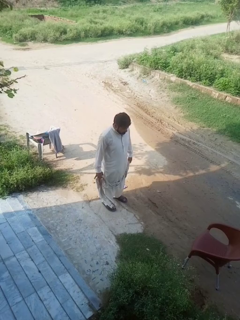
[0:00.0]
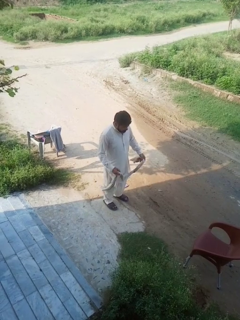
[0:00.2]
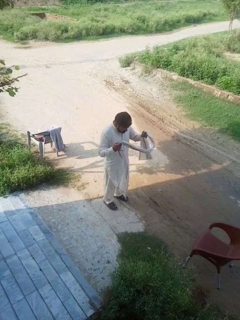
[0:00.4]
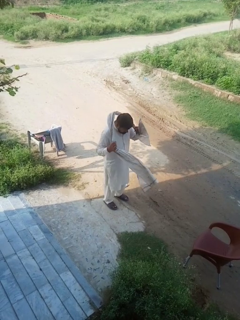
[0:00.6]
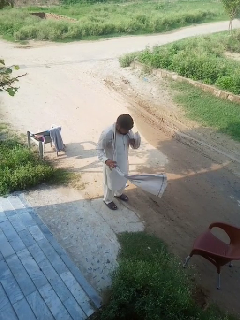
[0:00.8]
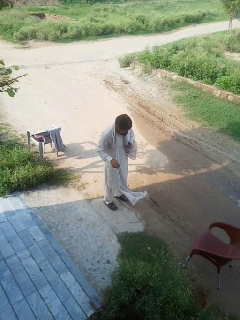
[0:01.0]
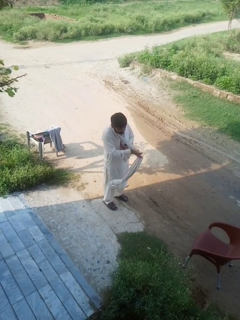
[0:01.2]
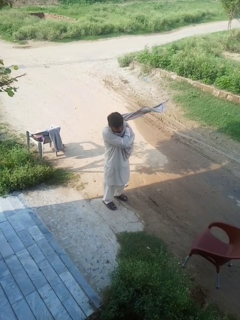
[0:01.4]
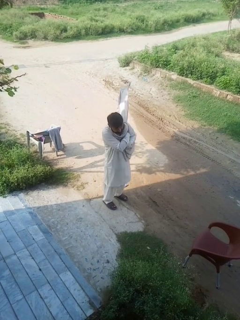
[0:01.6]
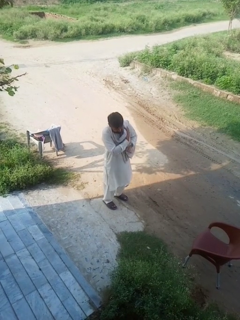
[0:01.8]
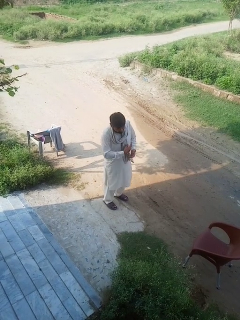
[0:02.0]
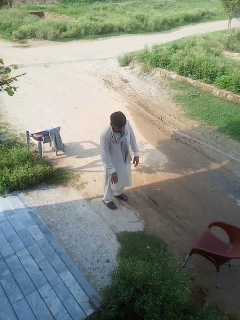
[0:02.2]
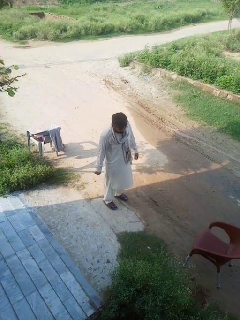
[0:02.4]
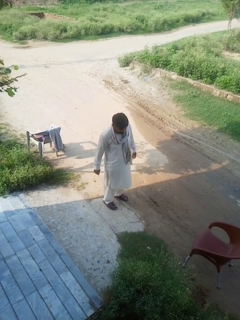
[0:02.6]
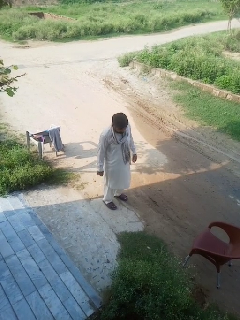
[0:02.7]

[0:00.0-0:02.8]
person puts on scarf

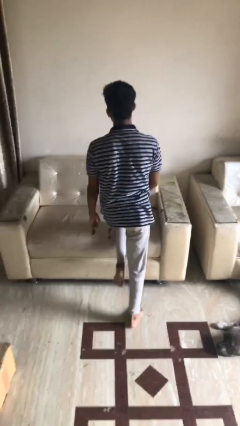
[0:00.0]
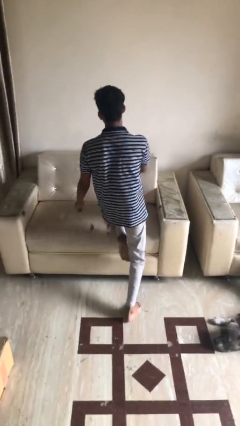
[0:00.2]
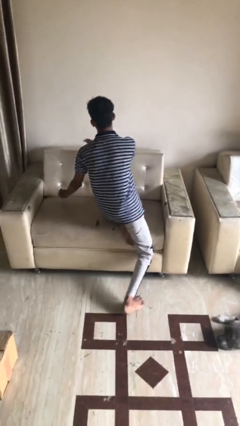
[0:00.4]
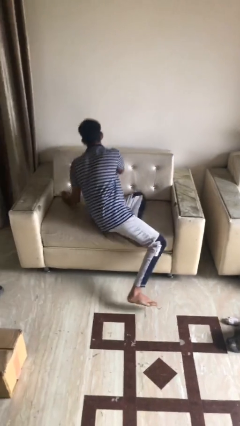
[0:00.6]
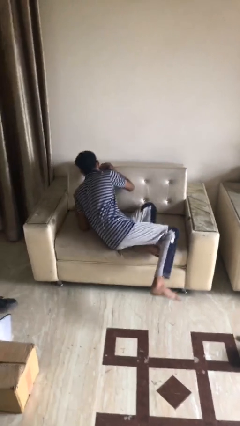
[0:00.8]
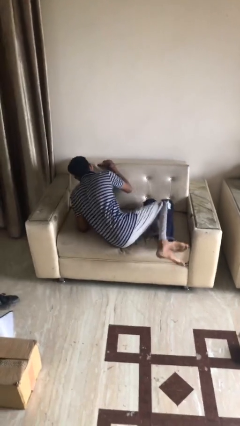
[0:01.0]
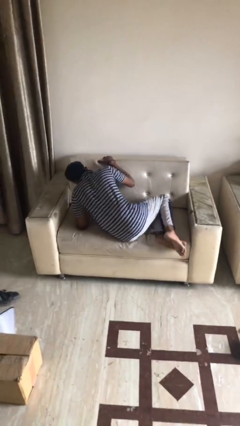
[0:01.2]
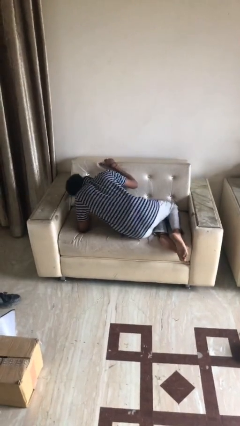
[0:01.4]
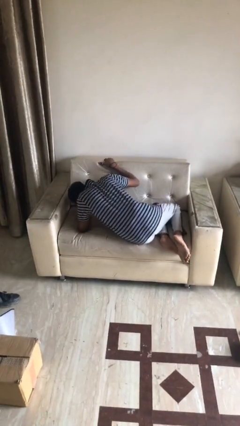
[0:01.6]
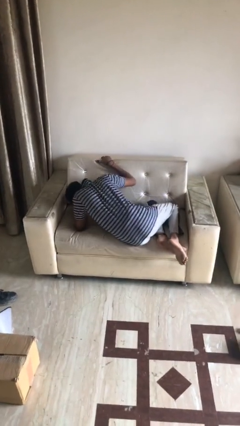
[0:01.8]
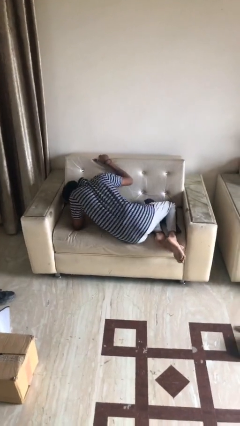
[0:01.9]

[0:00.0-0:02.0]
person lies down on bed

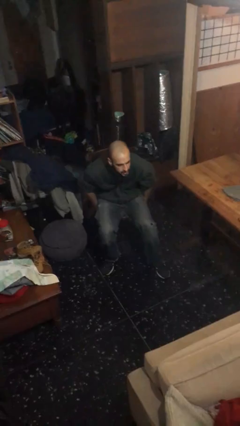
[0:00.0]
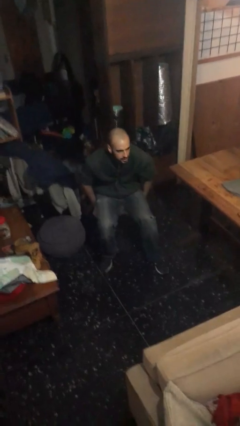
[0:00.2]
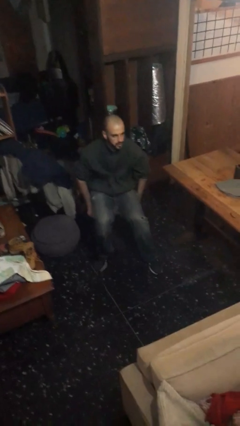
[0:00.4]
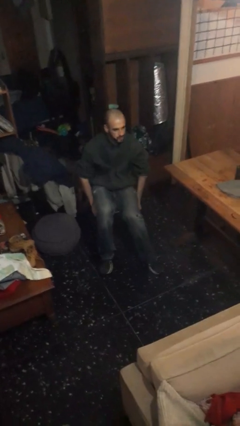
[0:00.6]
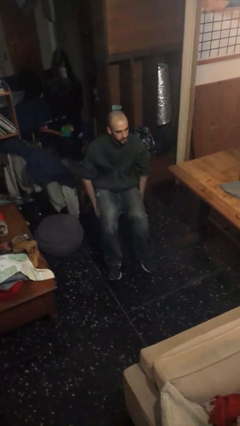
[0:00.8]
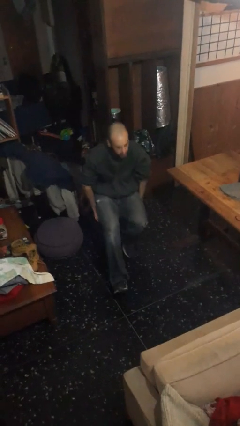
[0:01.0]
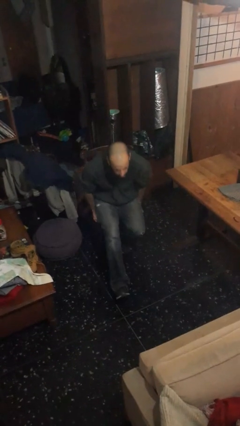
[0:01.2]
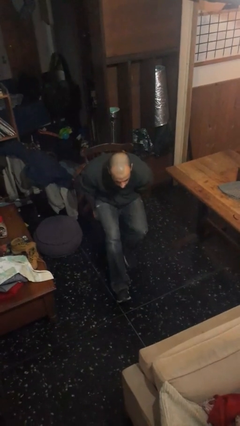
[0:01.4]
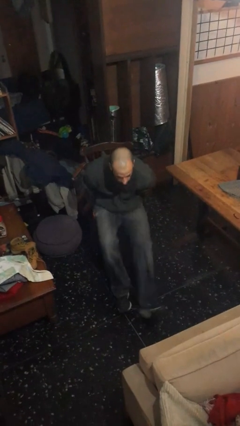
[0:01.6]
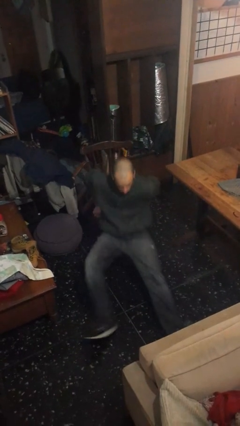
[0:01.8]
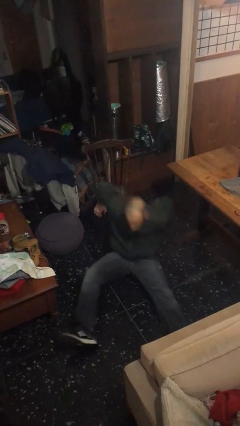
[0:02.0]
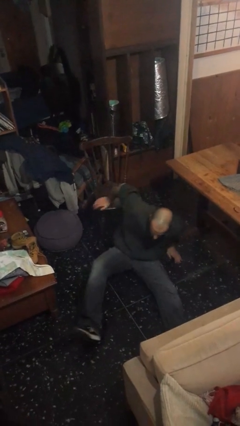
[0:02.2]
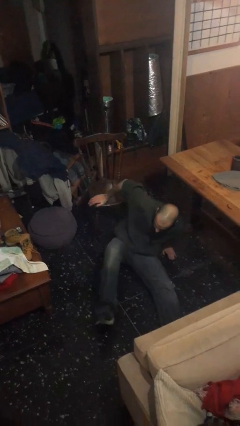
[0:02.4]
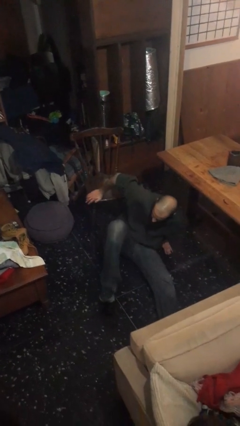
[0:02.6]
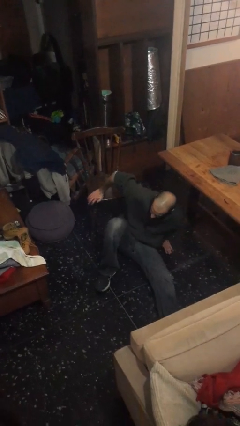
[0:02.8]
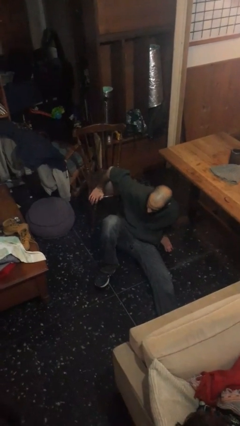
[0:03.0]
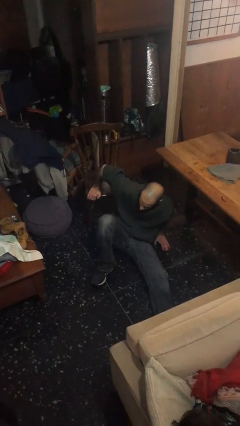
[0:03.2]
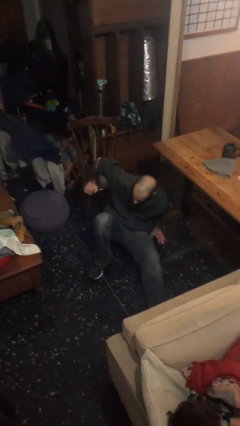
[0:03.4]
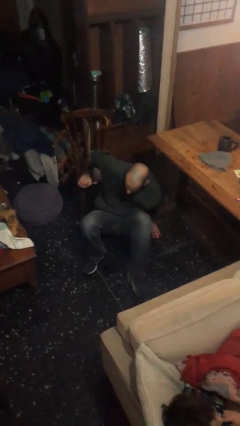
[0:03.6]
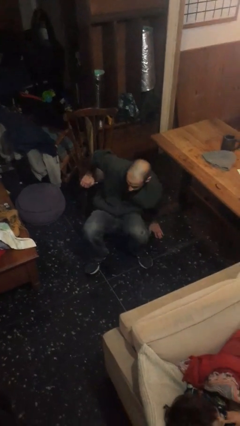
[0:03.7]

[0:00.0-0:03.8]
person falls from chair

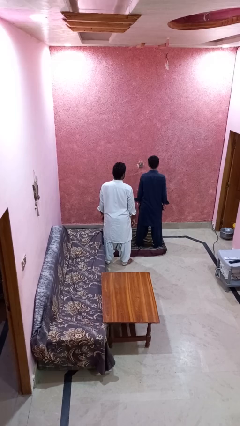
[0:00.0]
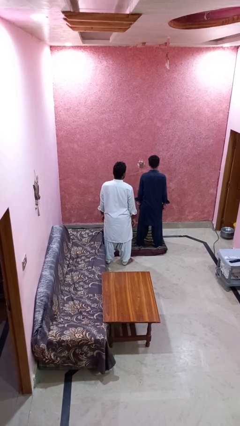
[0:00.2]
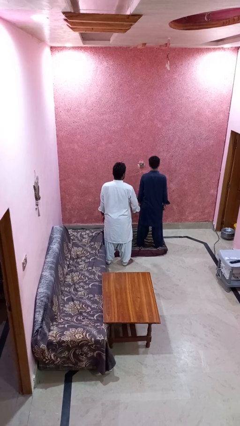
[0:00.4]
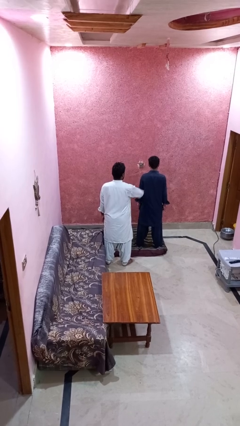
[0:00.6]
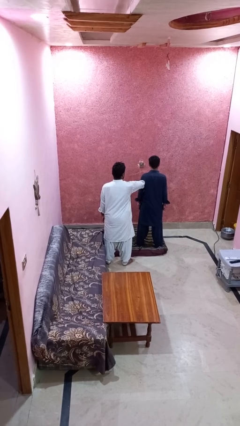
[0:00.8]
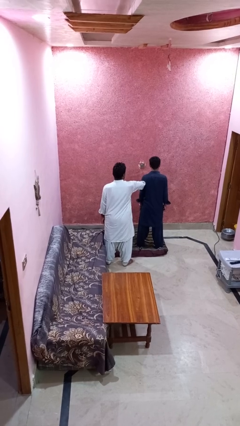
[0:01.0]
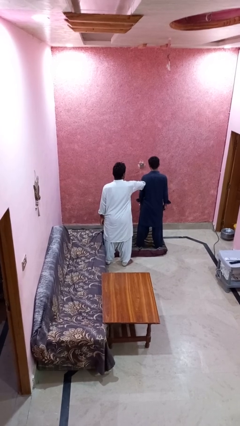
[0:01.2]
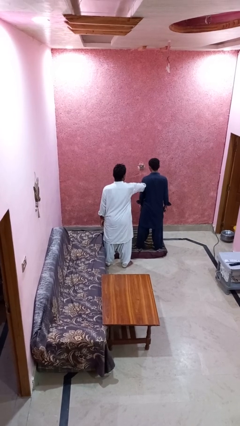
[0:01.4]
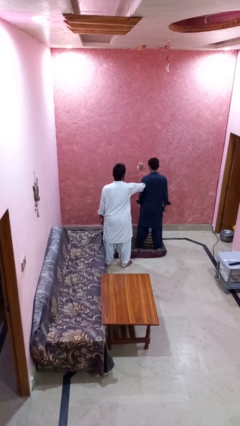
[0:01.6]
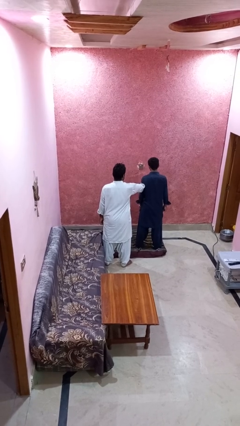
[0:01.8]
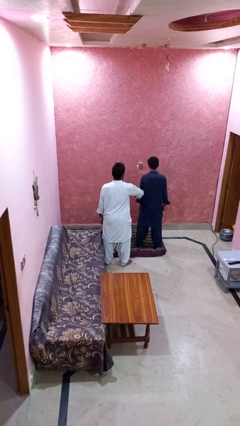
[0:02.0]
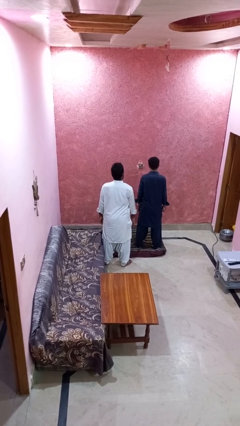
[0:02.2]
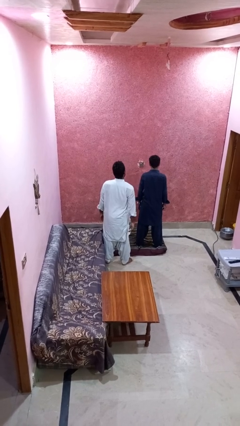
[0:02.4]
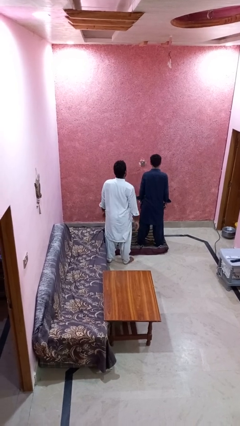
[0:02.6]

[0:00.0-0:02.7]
person grabs person by forearm

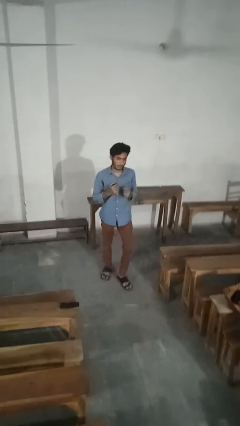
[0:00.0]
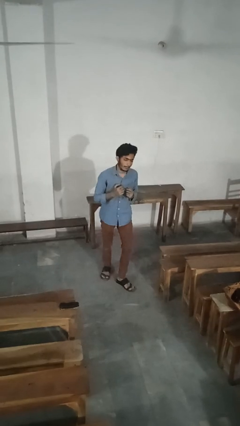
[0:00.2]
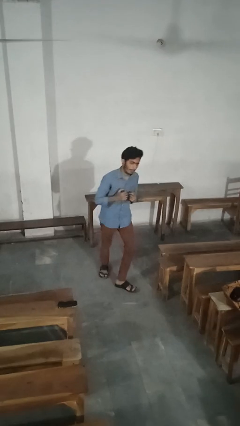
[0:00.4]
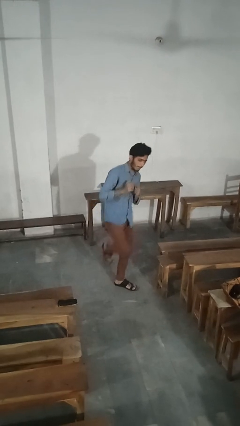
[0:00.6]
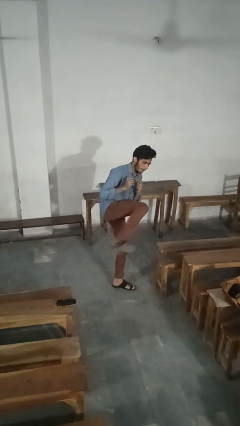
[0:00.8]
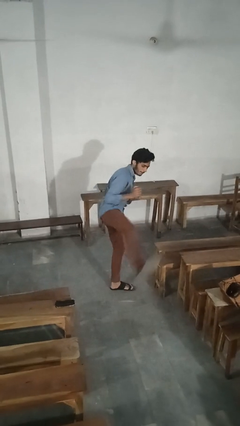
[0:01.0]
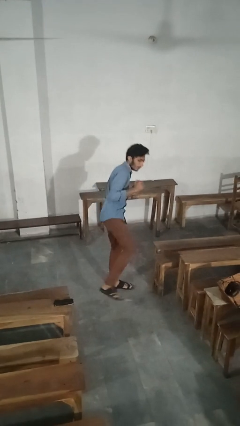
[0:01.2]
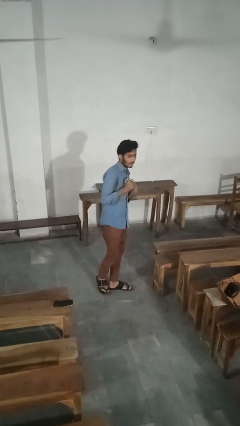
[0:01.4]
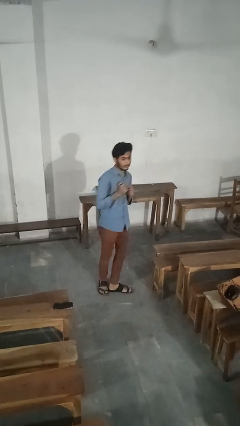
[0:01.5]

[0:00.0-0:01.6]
person karate kicks

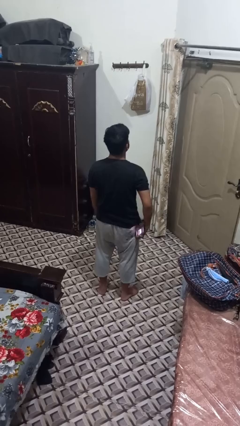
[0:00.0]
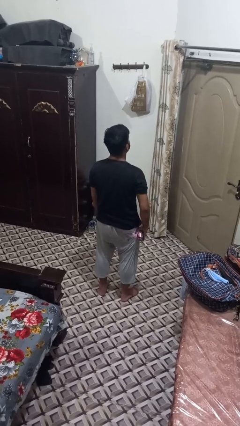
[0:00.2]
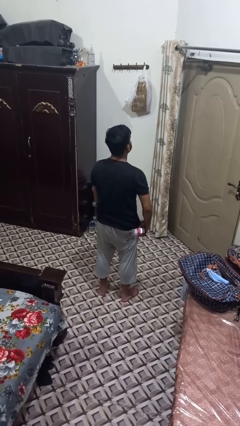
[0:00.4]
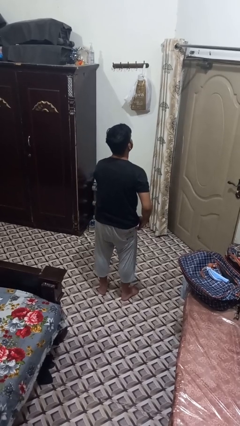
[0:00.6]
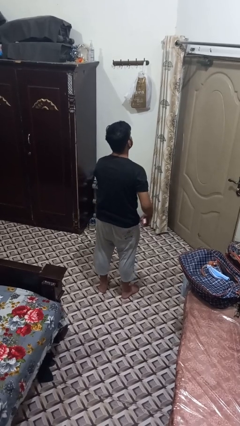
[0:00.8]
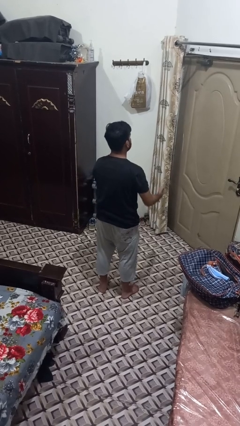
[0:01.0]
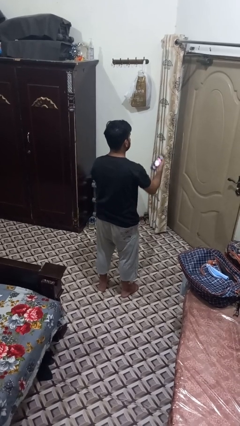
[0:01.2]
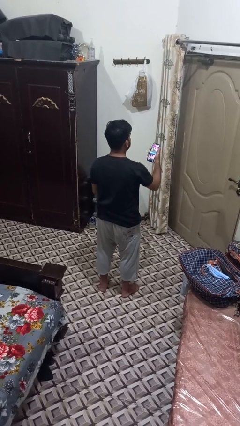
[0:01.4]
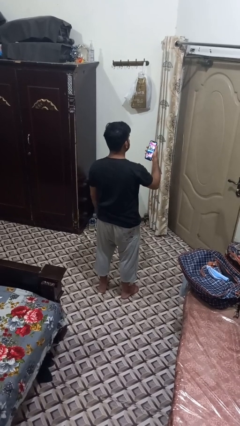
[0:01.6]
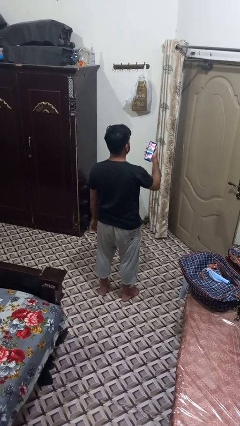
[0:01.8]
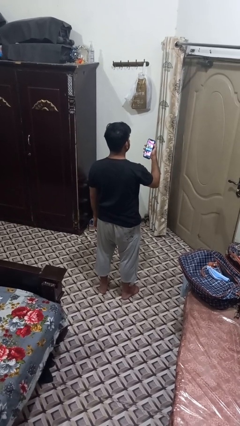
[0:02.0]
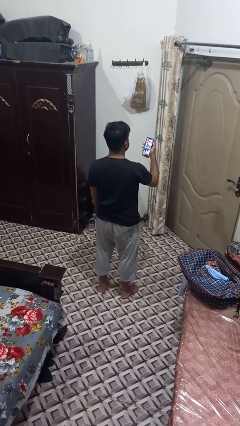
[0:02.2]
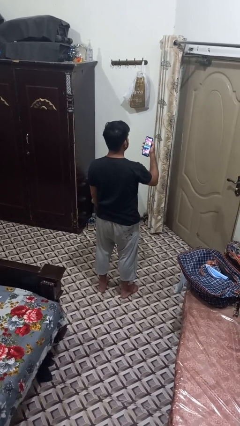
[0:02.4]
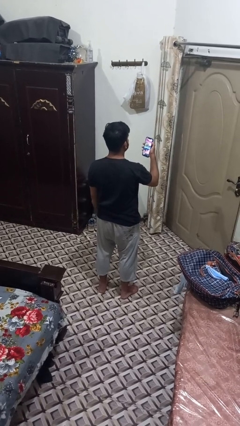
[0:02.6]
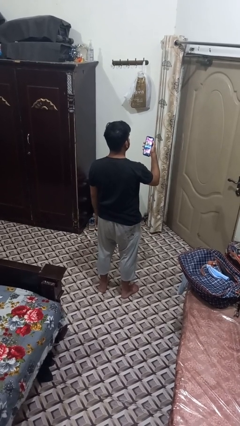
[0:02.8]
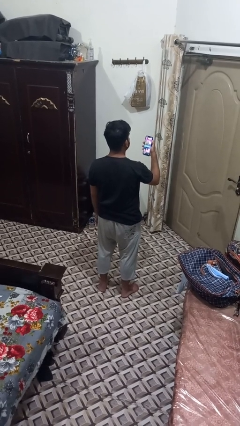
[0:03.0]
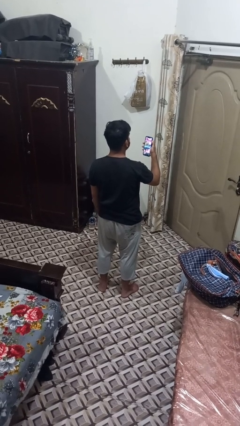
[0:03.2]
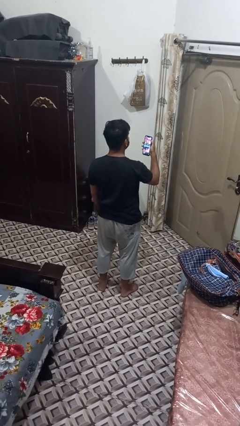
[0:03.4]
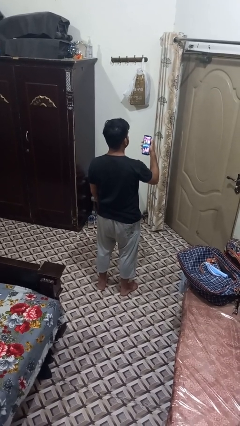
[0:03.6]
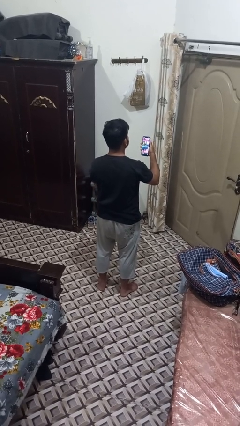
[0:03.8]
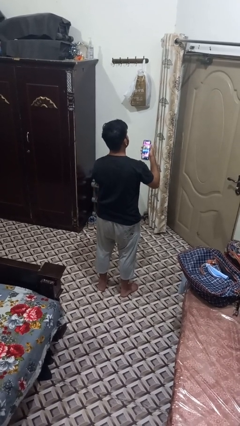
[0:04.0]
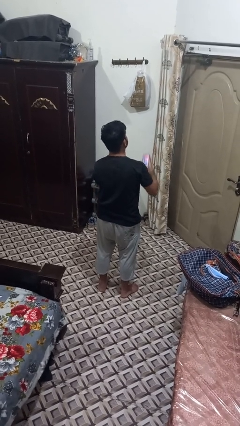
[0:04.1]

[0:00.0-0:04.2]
person takes phone from pocket

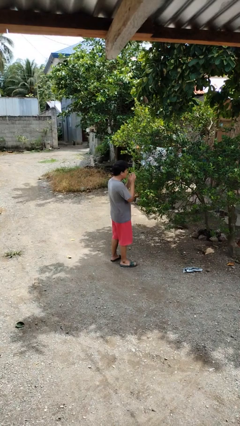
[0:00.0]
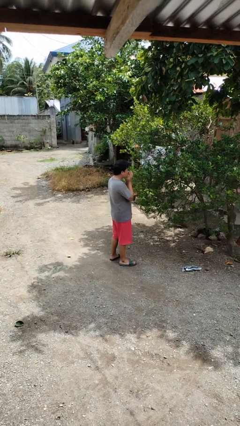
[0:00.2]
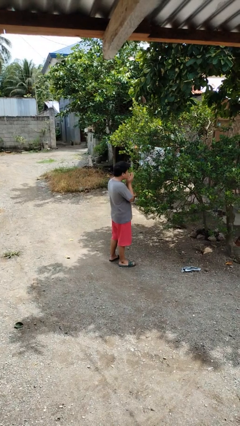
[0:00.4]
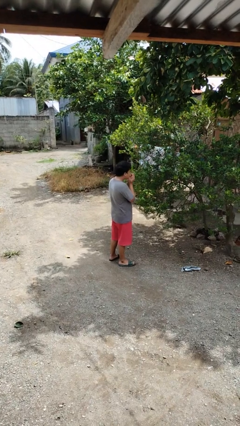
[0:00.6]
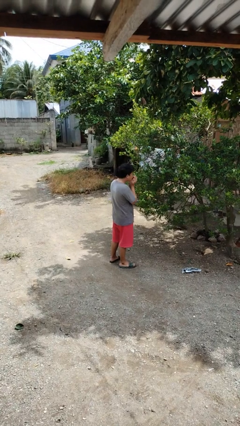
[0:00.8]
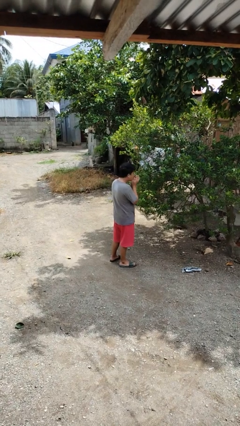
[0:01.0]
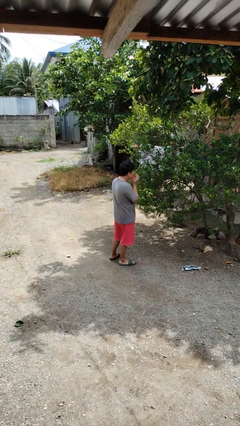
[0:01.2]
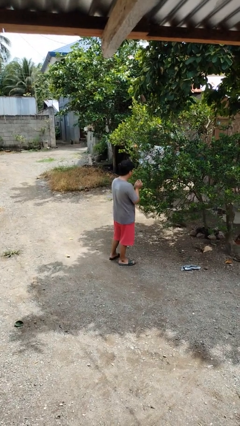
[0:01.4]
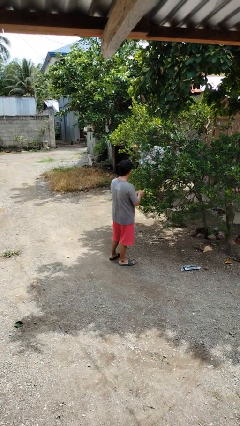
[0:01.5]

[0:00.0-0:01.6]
person blows into hands
